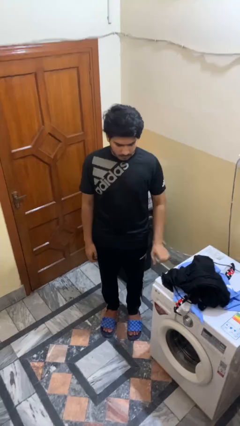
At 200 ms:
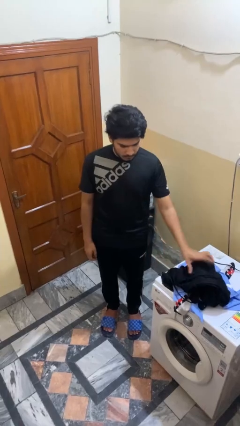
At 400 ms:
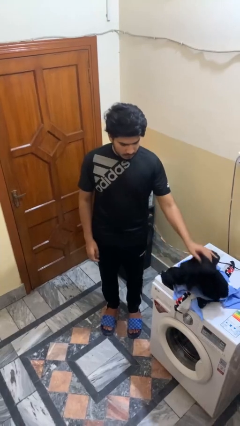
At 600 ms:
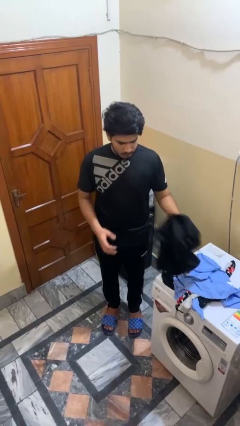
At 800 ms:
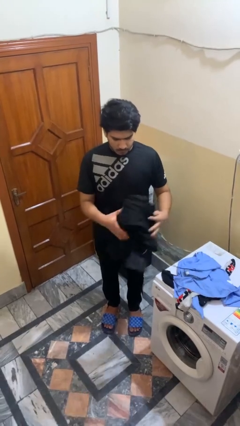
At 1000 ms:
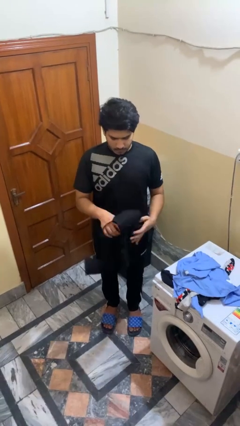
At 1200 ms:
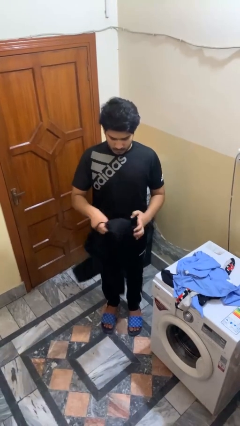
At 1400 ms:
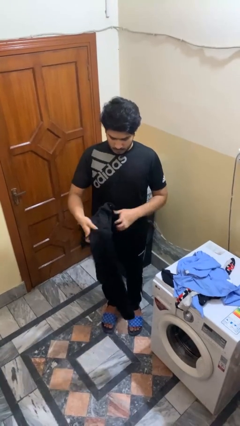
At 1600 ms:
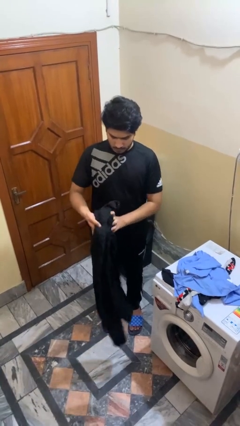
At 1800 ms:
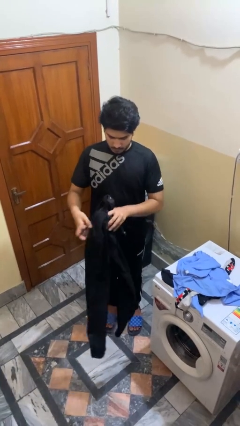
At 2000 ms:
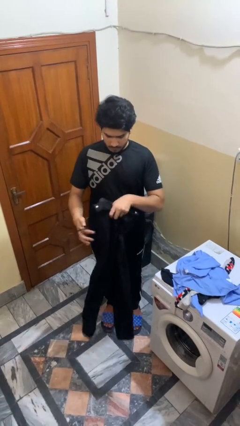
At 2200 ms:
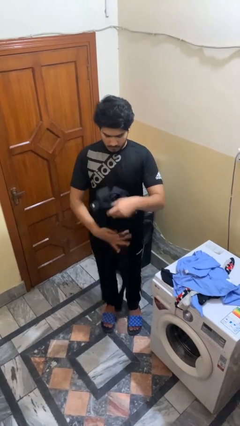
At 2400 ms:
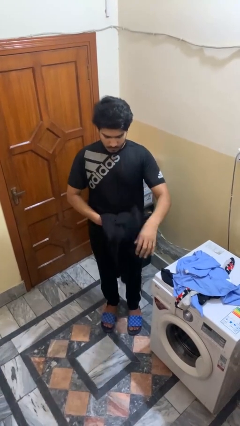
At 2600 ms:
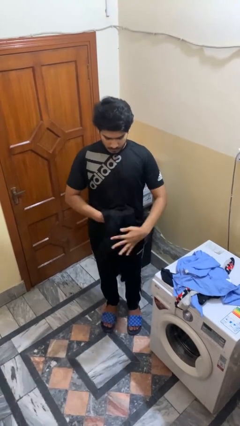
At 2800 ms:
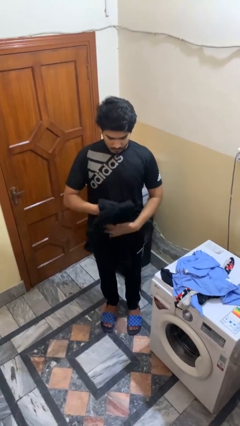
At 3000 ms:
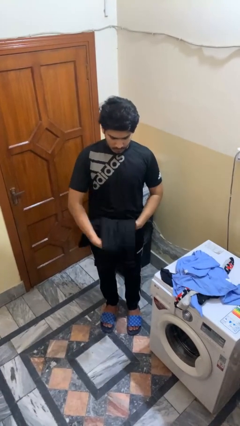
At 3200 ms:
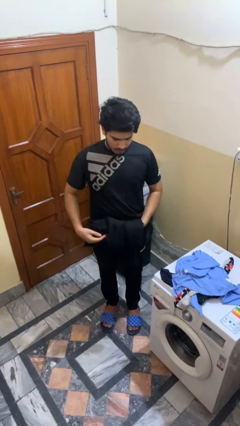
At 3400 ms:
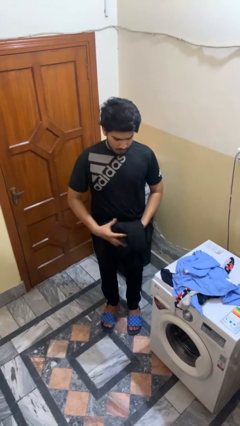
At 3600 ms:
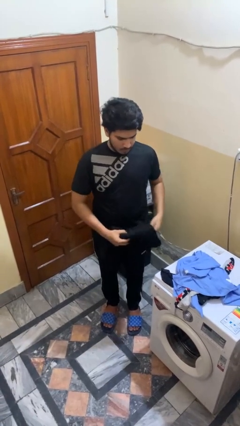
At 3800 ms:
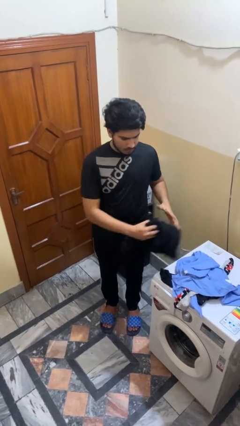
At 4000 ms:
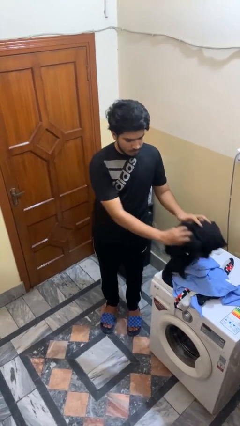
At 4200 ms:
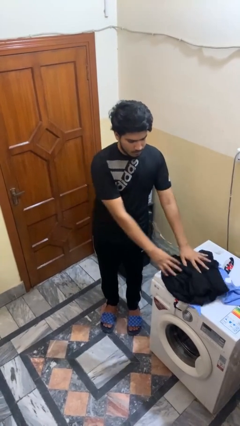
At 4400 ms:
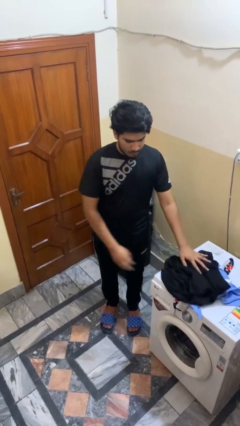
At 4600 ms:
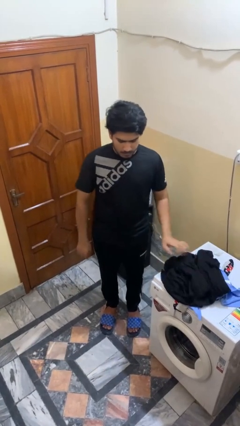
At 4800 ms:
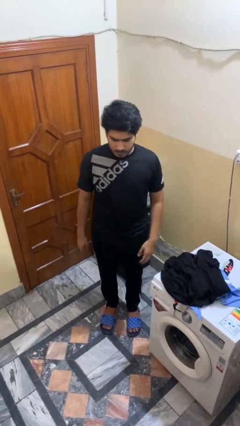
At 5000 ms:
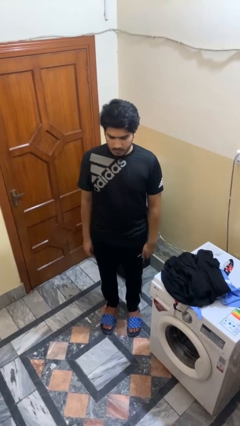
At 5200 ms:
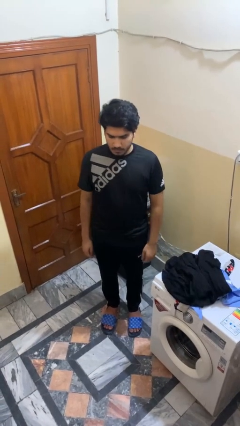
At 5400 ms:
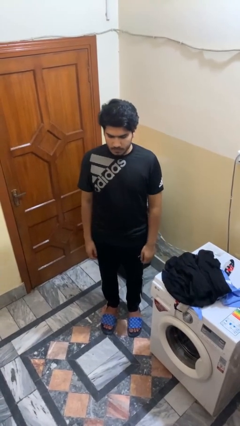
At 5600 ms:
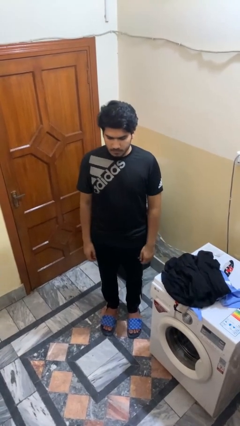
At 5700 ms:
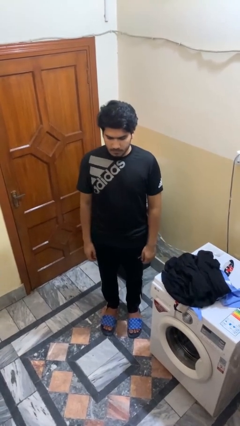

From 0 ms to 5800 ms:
person folds pants

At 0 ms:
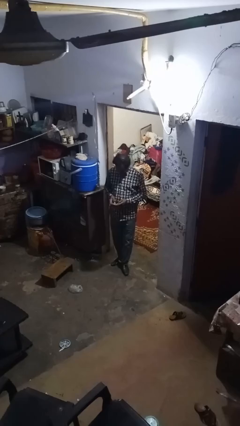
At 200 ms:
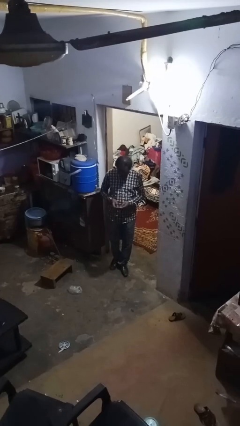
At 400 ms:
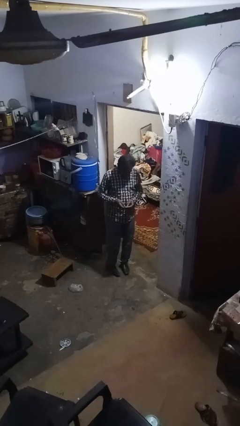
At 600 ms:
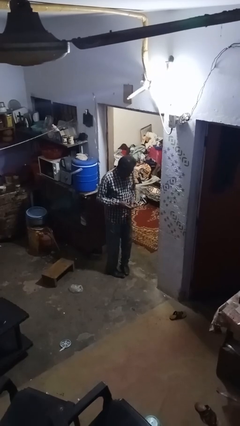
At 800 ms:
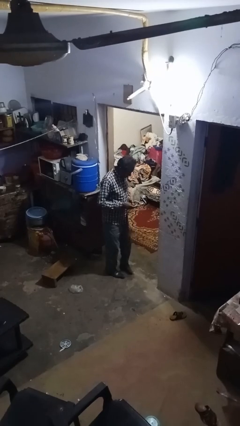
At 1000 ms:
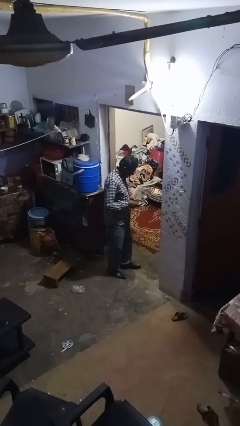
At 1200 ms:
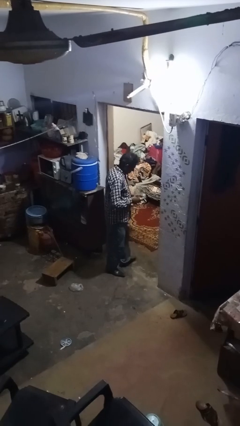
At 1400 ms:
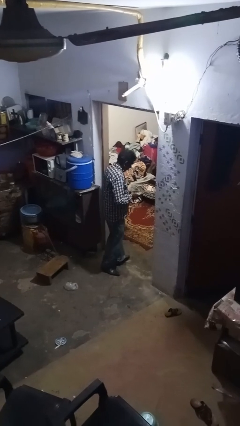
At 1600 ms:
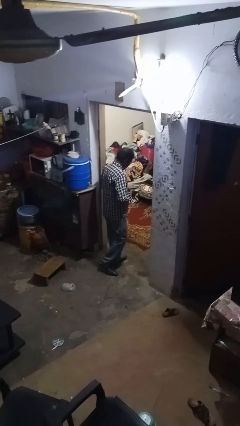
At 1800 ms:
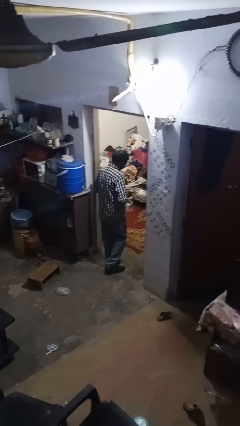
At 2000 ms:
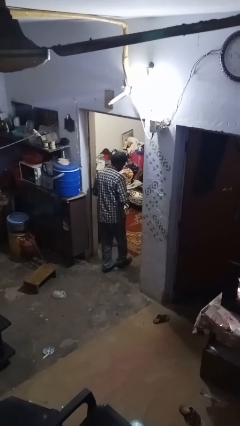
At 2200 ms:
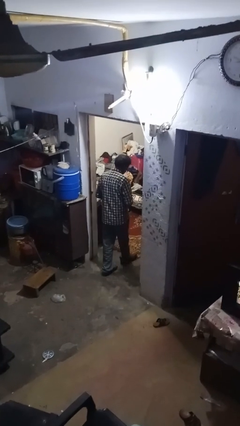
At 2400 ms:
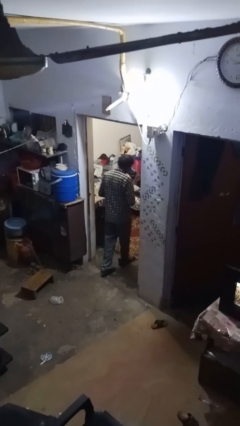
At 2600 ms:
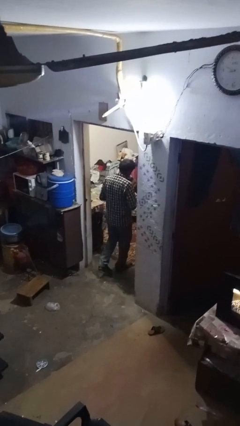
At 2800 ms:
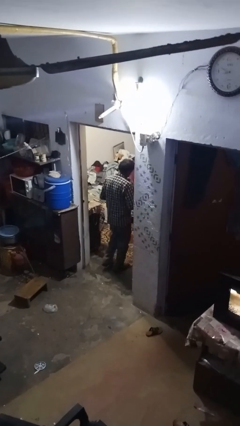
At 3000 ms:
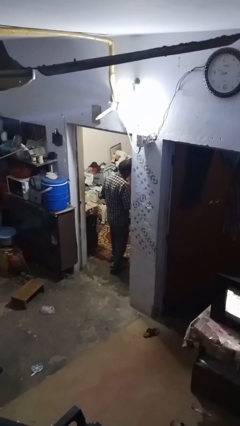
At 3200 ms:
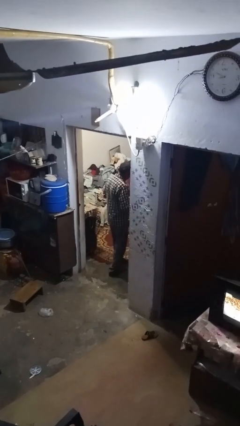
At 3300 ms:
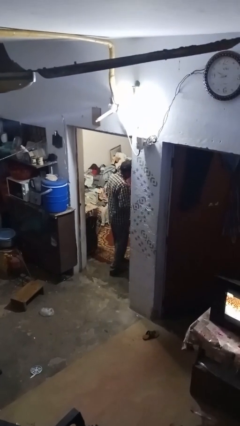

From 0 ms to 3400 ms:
person exits scene through structure

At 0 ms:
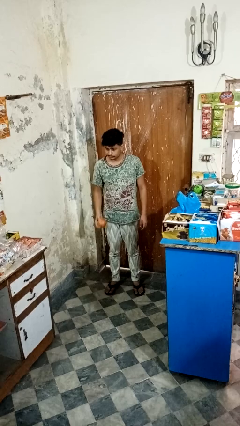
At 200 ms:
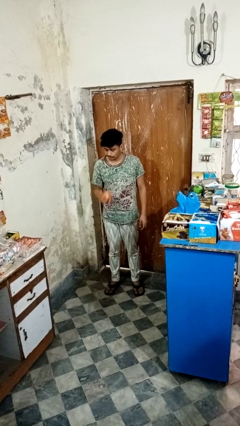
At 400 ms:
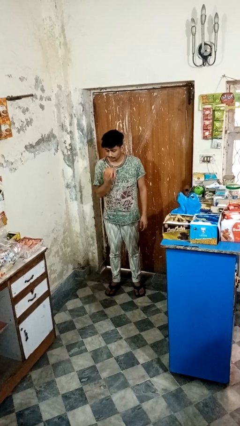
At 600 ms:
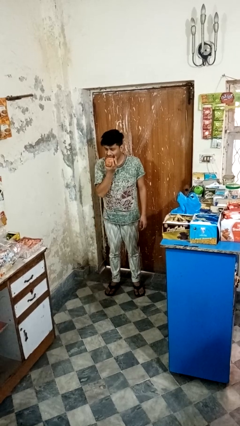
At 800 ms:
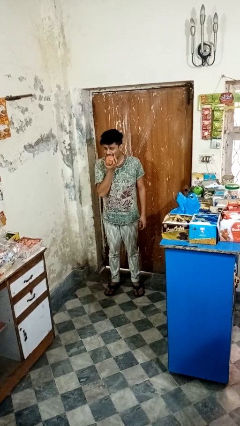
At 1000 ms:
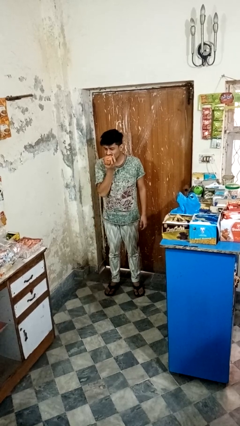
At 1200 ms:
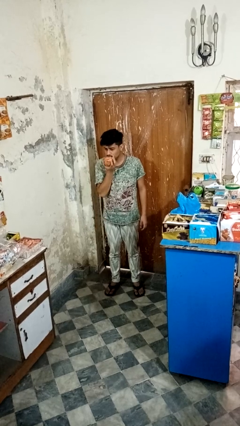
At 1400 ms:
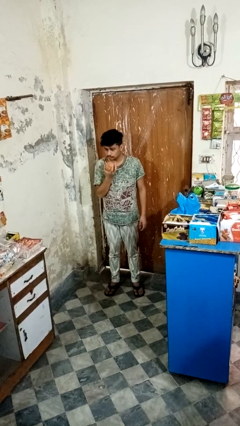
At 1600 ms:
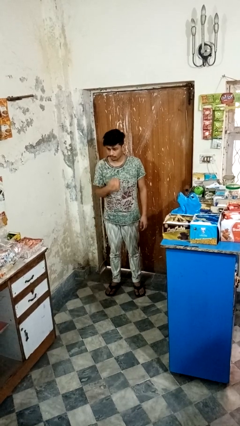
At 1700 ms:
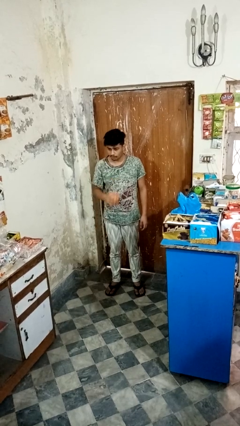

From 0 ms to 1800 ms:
person eats apple

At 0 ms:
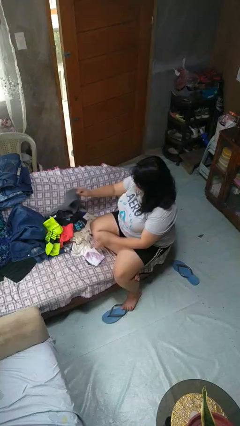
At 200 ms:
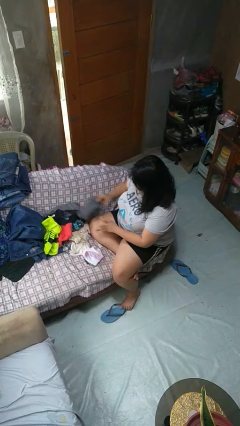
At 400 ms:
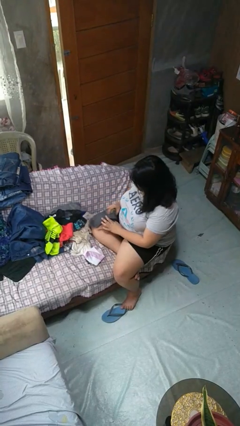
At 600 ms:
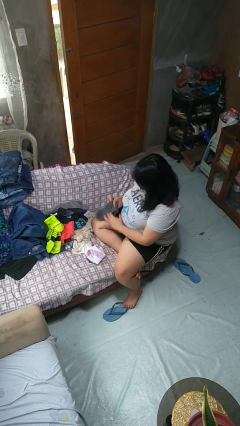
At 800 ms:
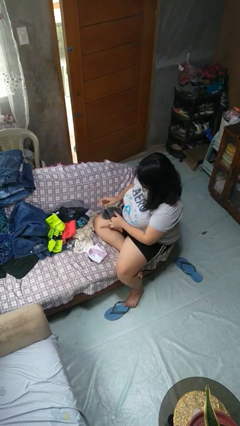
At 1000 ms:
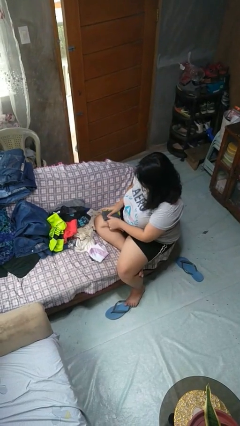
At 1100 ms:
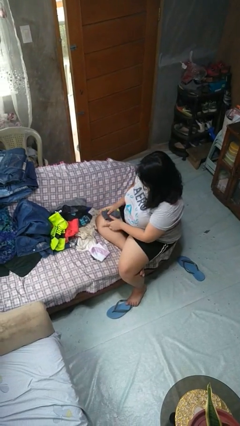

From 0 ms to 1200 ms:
person folds socks

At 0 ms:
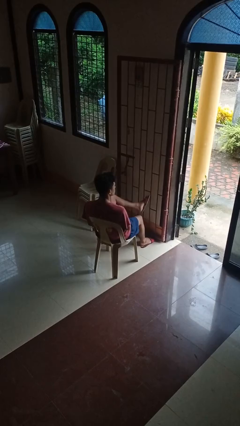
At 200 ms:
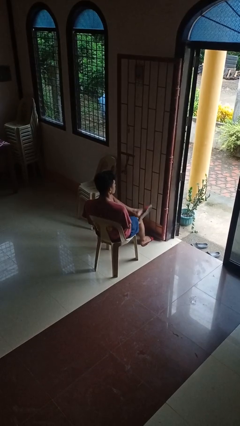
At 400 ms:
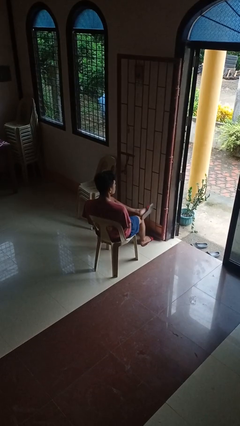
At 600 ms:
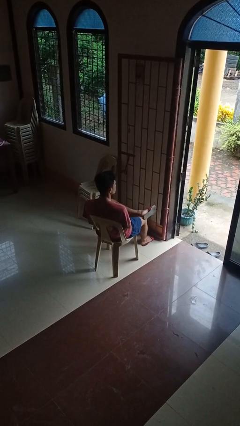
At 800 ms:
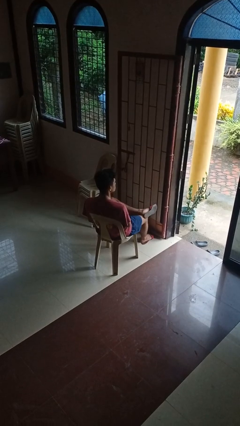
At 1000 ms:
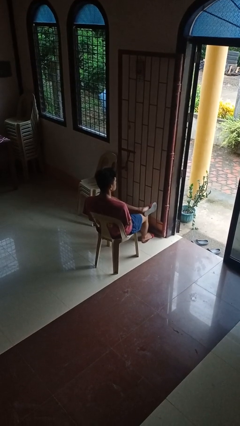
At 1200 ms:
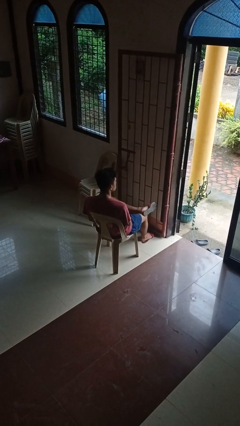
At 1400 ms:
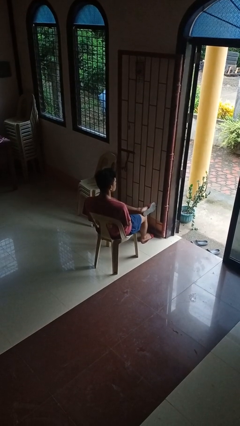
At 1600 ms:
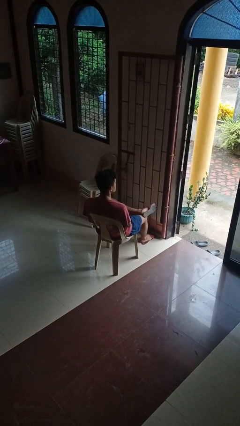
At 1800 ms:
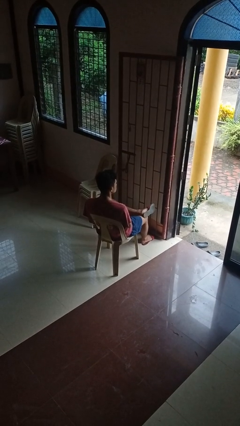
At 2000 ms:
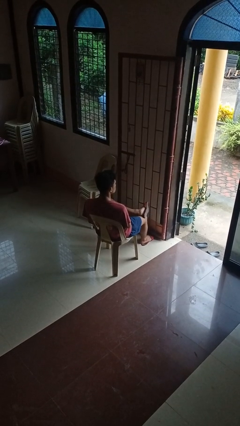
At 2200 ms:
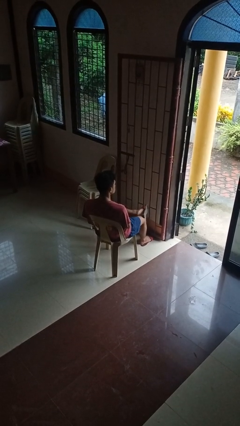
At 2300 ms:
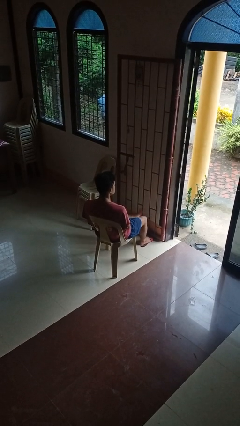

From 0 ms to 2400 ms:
person crosses legs

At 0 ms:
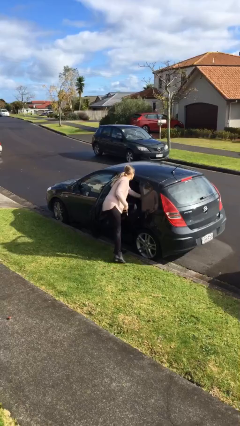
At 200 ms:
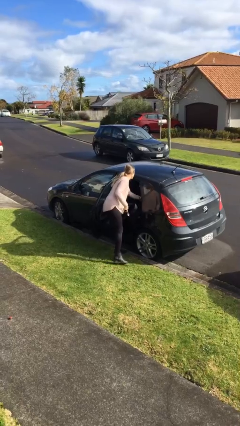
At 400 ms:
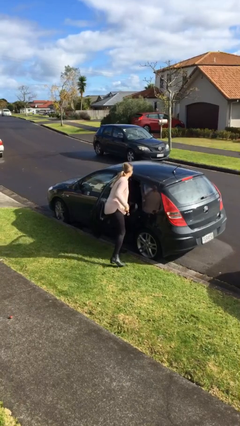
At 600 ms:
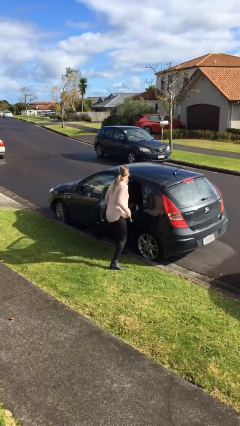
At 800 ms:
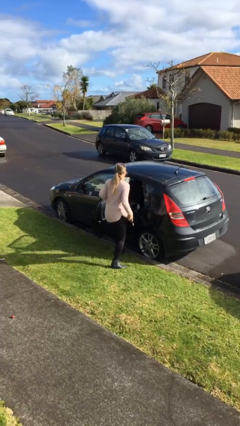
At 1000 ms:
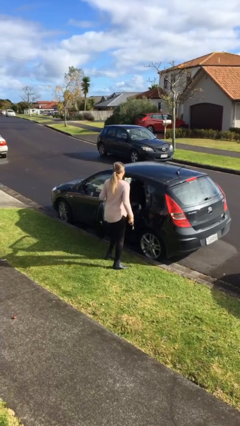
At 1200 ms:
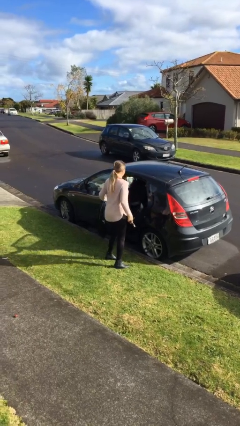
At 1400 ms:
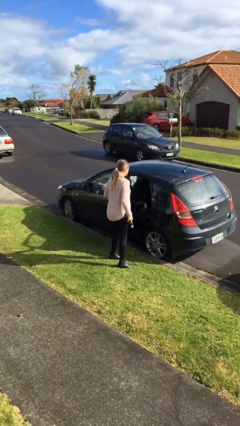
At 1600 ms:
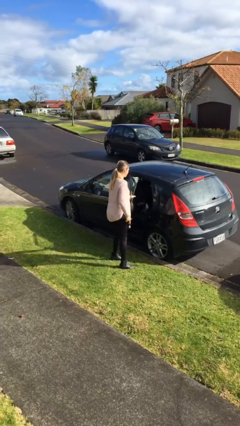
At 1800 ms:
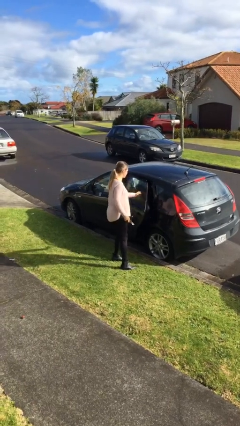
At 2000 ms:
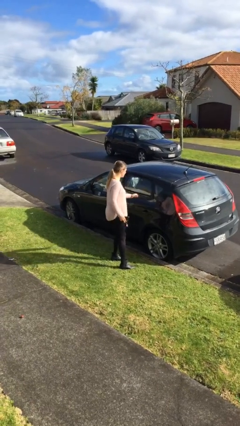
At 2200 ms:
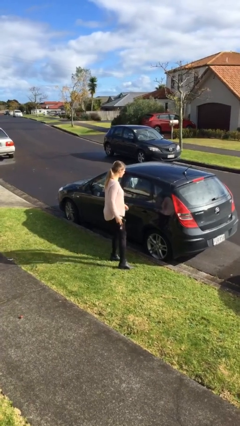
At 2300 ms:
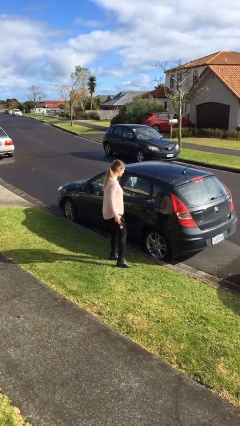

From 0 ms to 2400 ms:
person closes car door

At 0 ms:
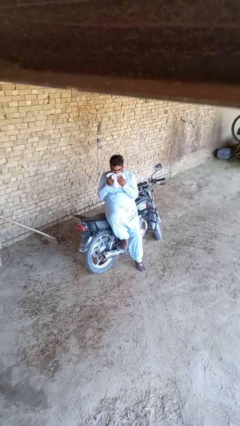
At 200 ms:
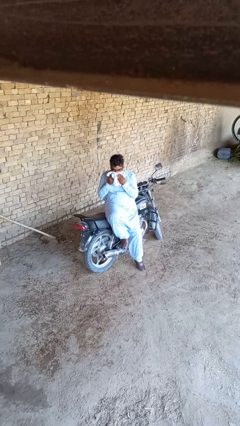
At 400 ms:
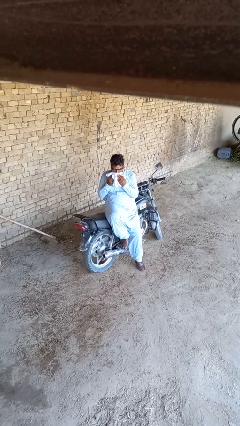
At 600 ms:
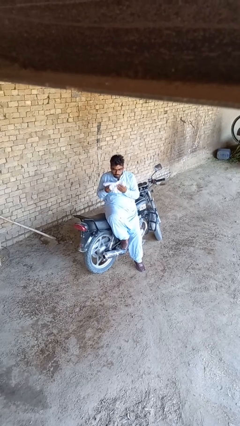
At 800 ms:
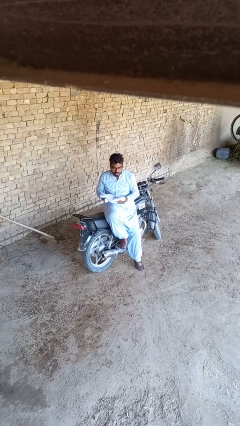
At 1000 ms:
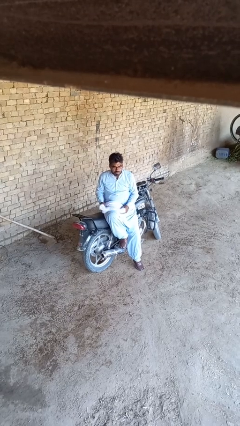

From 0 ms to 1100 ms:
person wipes mouth with napkin
